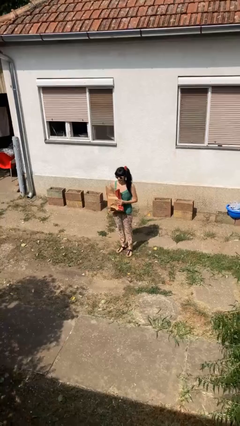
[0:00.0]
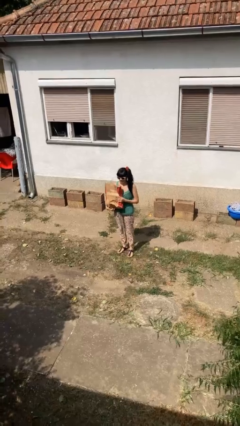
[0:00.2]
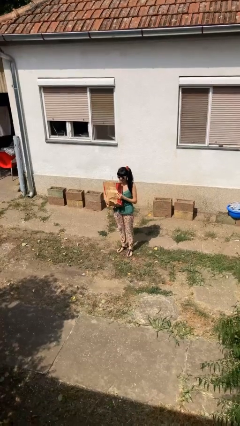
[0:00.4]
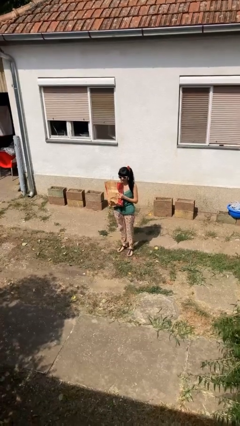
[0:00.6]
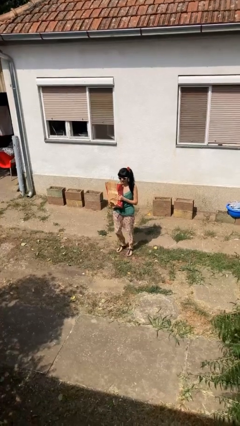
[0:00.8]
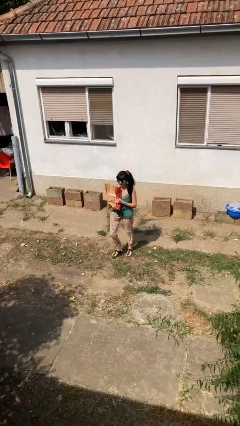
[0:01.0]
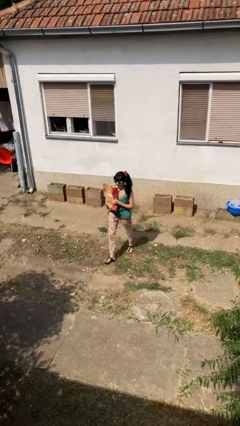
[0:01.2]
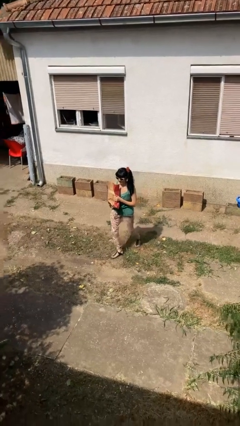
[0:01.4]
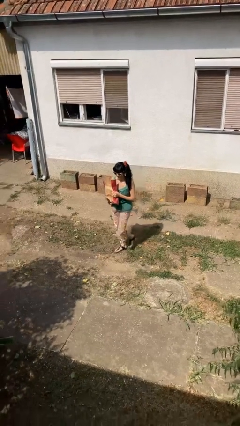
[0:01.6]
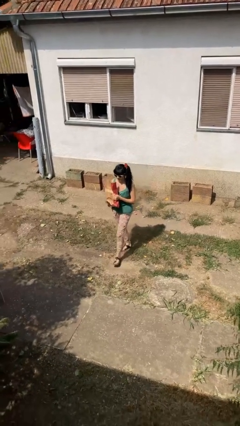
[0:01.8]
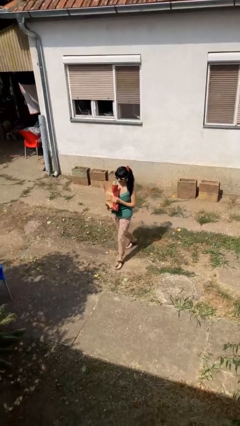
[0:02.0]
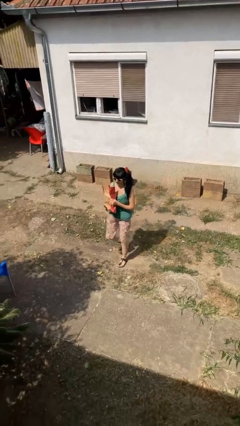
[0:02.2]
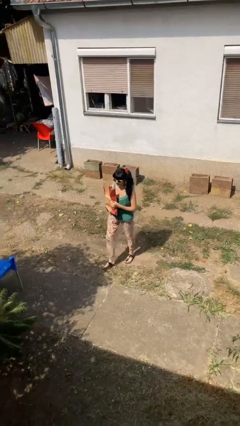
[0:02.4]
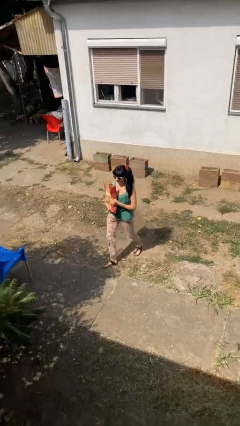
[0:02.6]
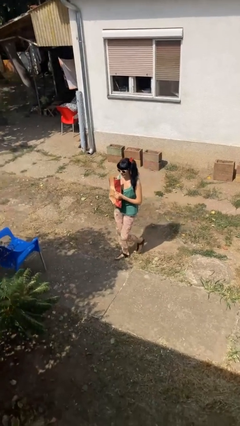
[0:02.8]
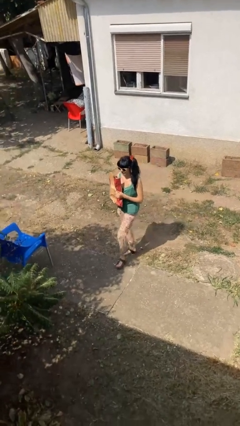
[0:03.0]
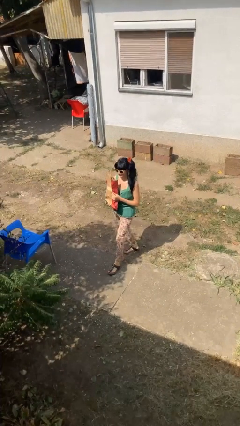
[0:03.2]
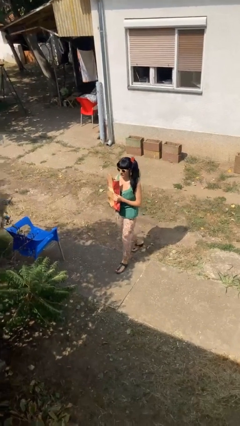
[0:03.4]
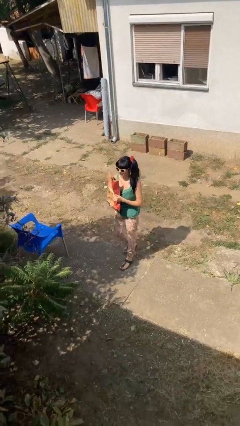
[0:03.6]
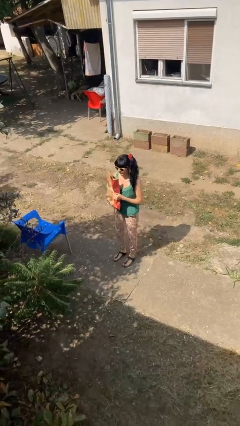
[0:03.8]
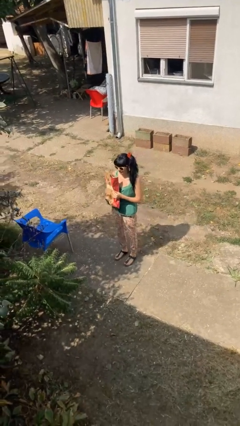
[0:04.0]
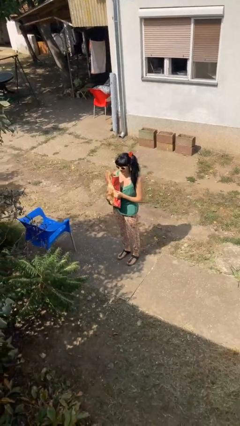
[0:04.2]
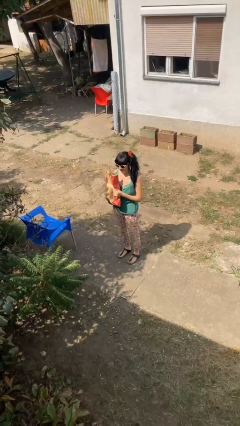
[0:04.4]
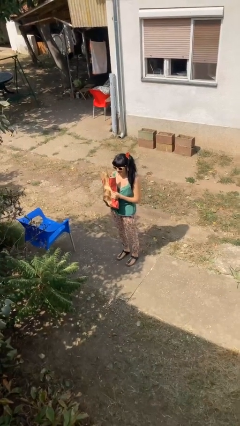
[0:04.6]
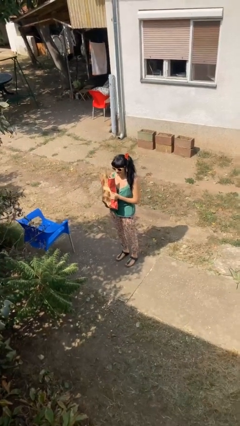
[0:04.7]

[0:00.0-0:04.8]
person carries groceries

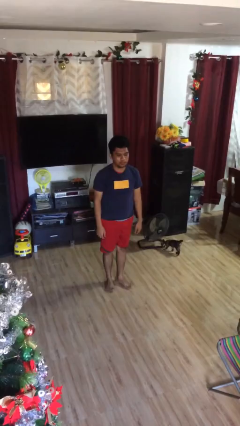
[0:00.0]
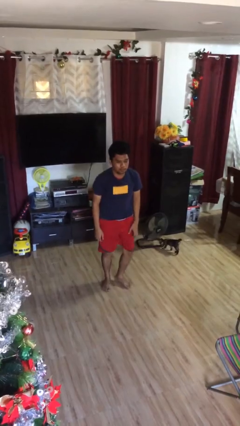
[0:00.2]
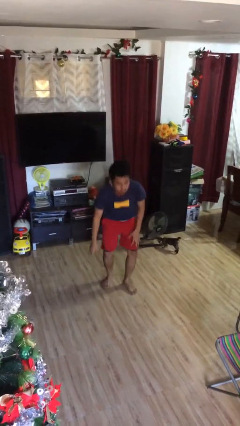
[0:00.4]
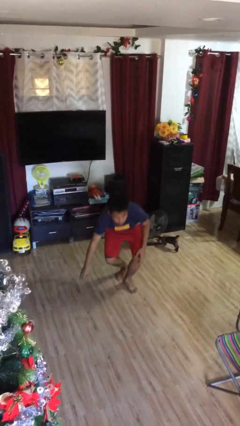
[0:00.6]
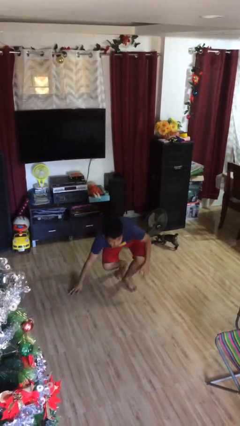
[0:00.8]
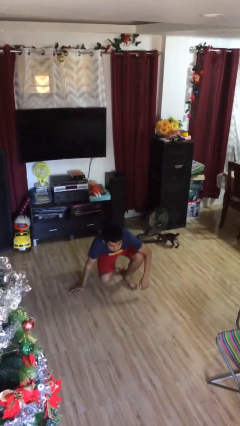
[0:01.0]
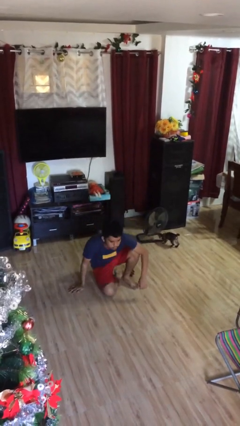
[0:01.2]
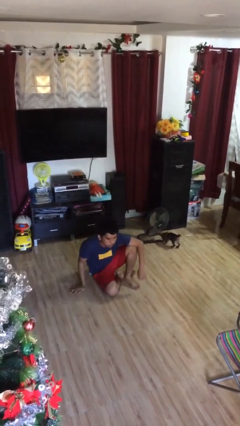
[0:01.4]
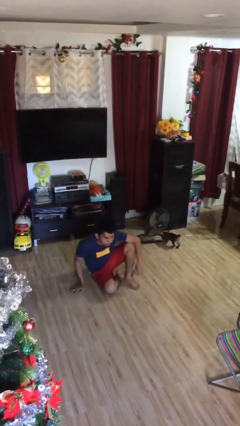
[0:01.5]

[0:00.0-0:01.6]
person sits down

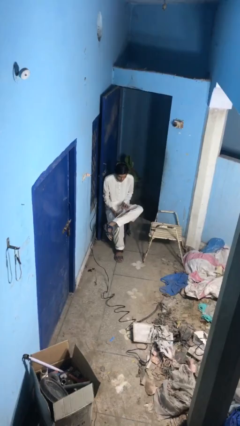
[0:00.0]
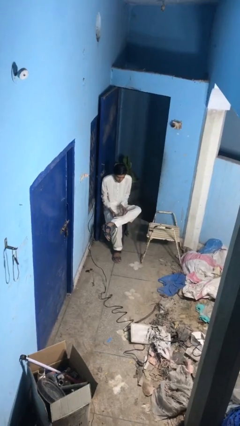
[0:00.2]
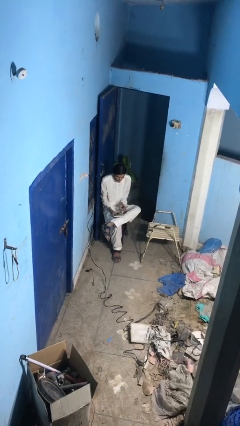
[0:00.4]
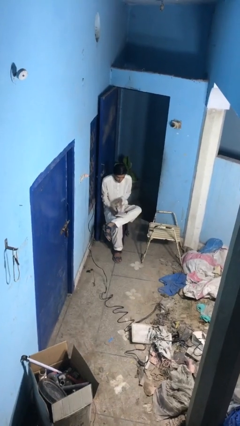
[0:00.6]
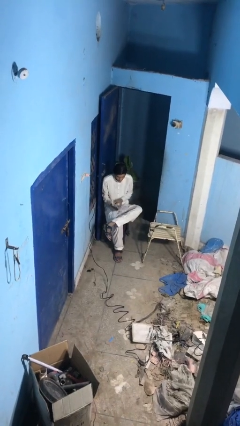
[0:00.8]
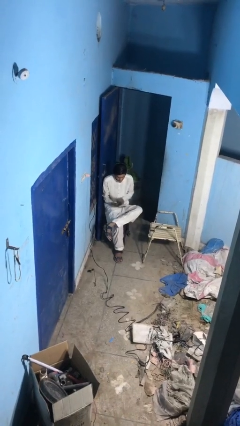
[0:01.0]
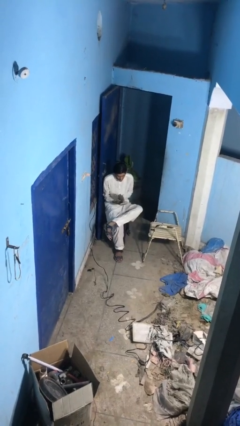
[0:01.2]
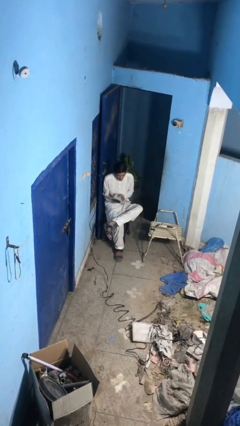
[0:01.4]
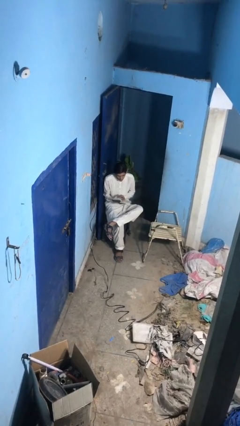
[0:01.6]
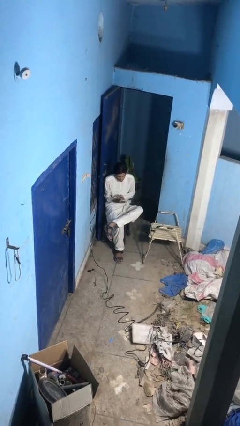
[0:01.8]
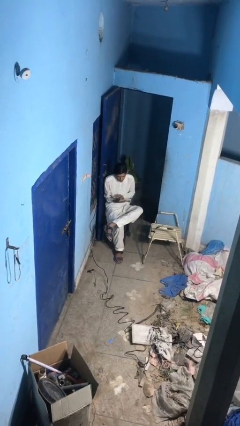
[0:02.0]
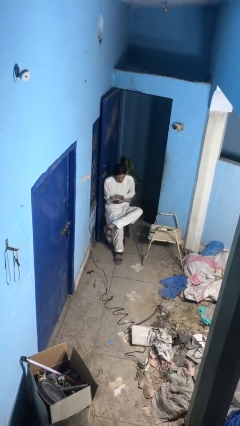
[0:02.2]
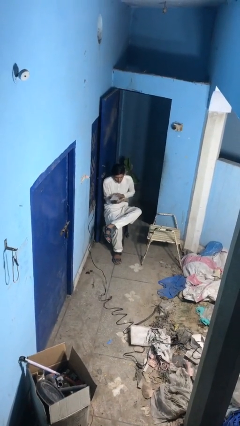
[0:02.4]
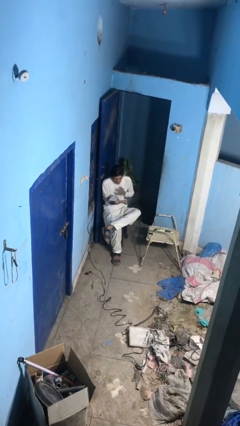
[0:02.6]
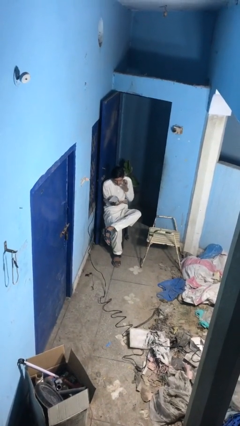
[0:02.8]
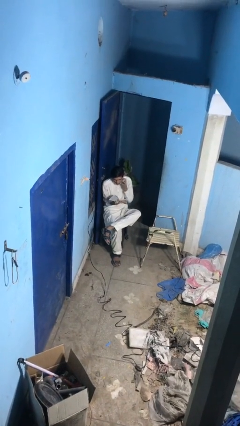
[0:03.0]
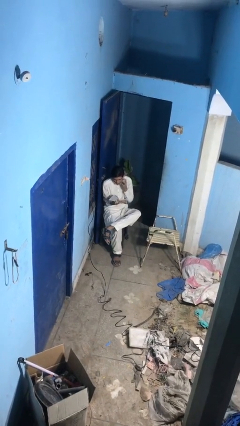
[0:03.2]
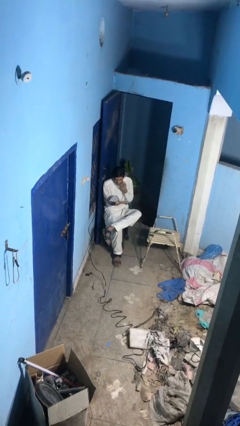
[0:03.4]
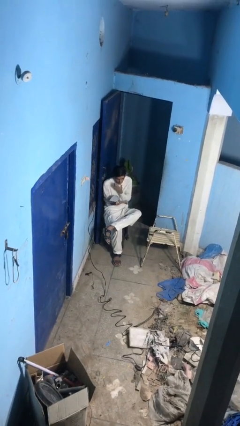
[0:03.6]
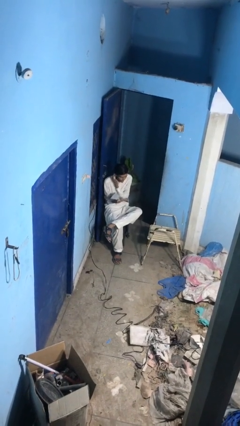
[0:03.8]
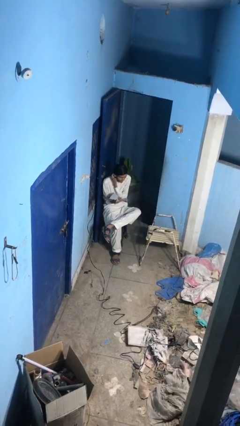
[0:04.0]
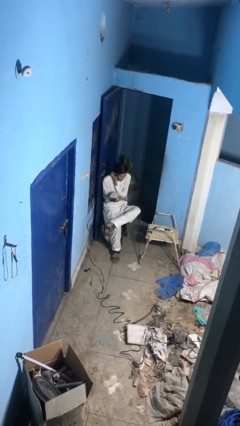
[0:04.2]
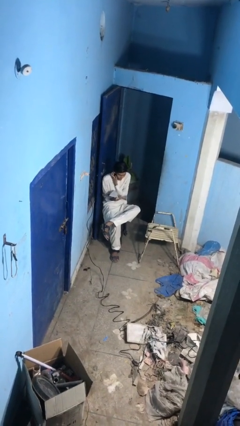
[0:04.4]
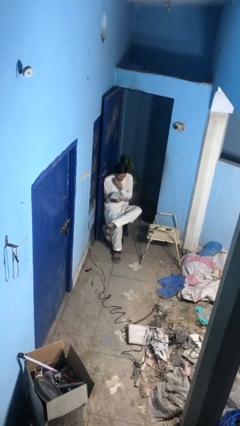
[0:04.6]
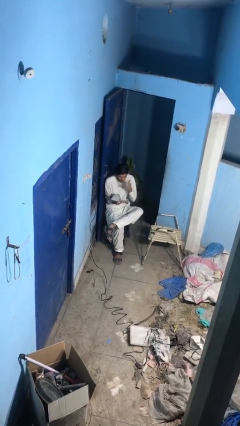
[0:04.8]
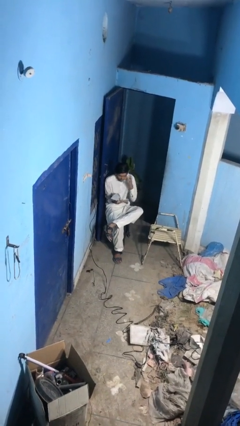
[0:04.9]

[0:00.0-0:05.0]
person reads document

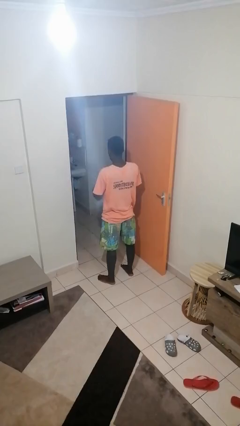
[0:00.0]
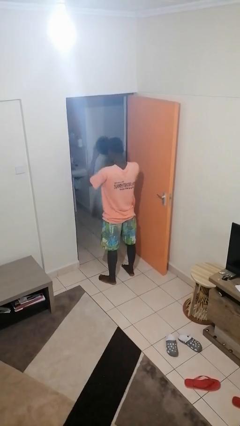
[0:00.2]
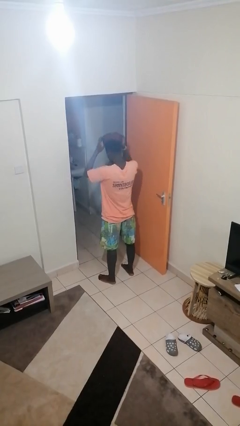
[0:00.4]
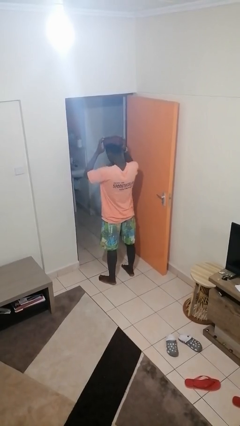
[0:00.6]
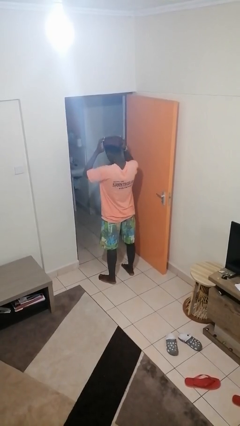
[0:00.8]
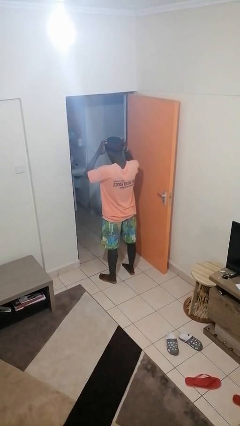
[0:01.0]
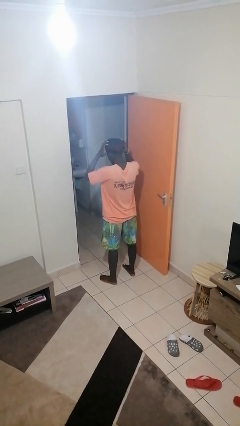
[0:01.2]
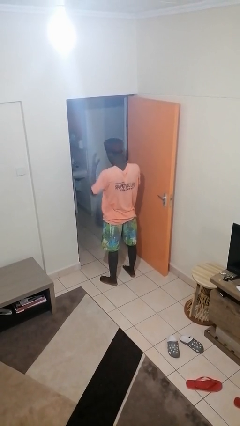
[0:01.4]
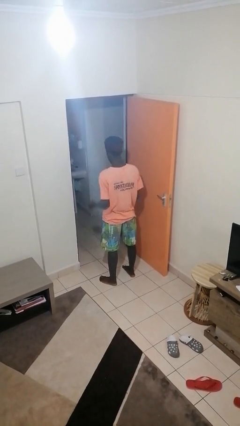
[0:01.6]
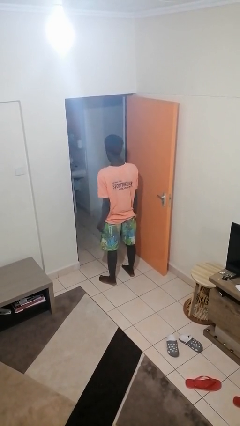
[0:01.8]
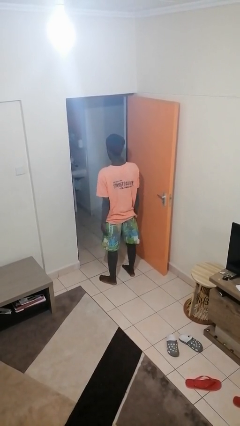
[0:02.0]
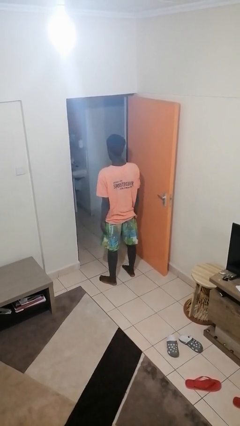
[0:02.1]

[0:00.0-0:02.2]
person puts on hat

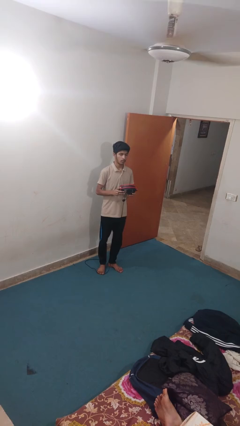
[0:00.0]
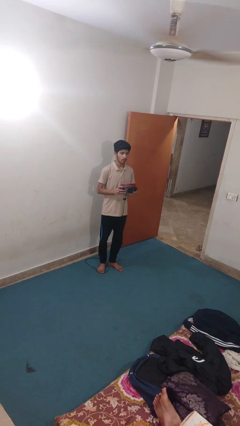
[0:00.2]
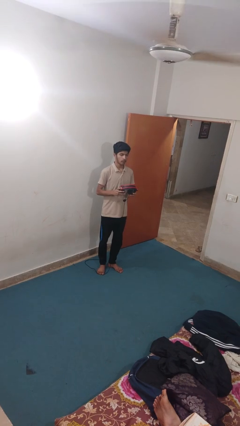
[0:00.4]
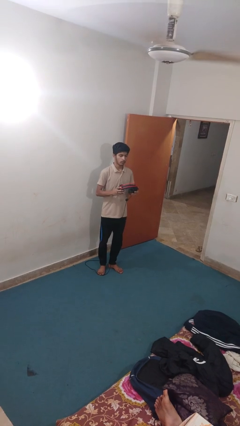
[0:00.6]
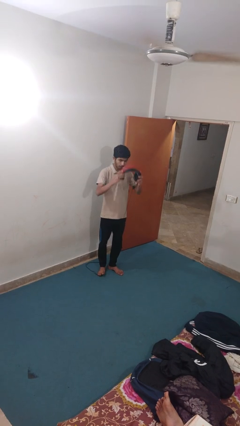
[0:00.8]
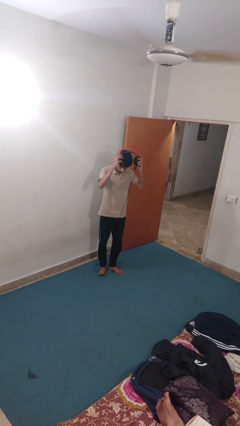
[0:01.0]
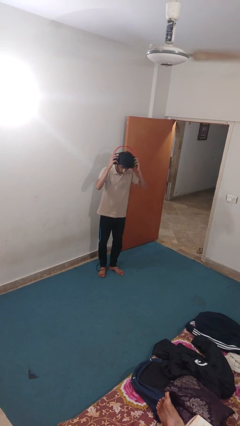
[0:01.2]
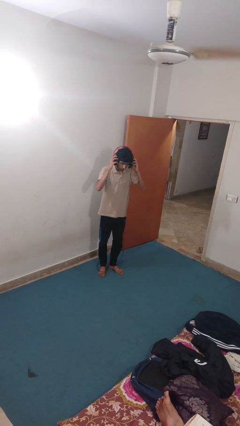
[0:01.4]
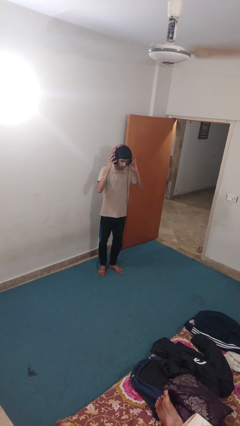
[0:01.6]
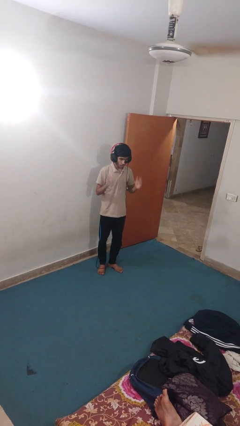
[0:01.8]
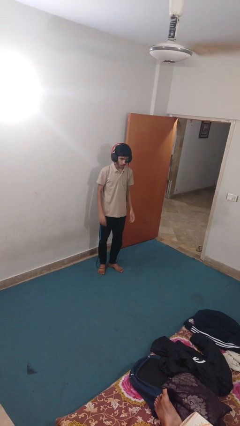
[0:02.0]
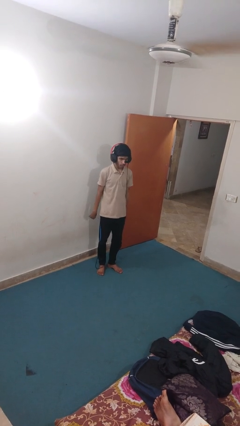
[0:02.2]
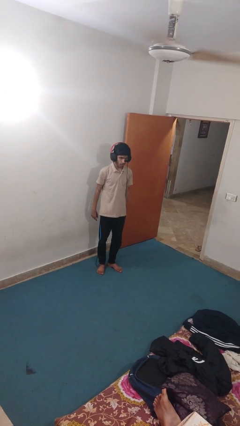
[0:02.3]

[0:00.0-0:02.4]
person puts on headphones

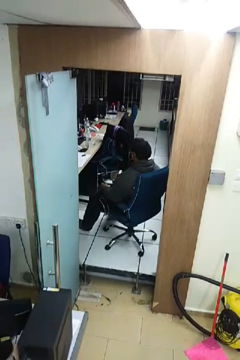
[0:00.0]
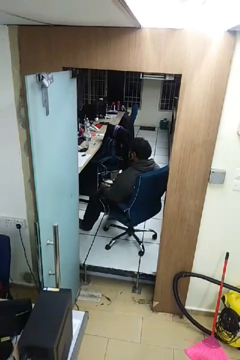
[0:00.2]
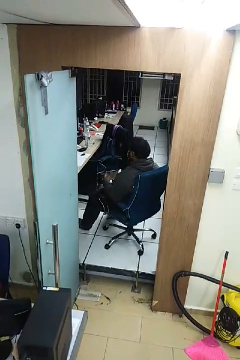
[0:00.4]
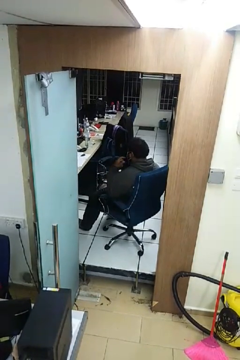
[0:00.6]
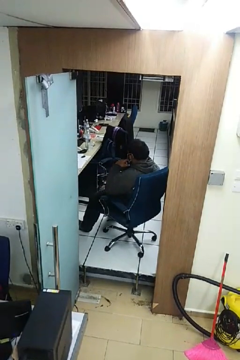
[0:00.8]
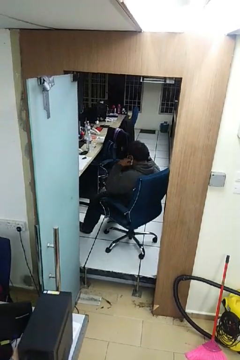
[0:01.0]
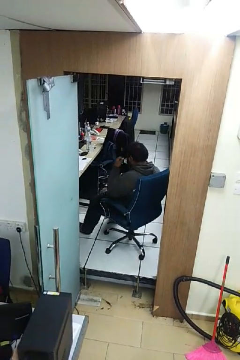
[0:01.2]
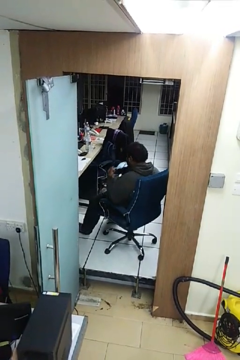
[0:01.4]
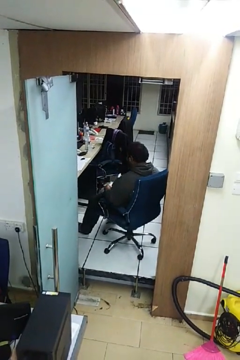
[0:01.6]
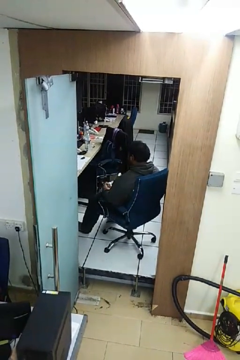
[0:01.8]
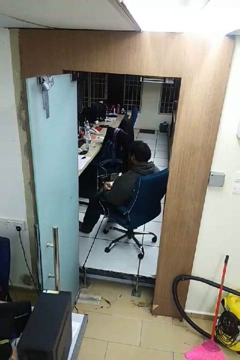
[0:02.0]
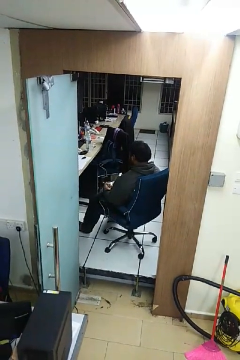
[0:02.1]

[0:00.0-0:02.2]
person takes off facemask
